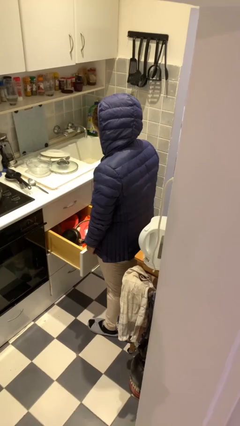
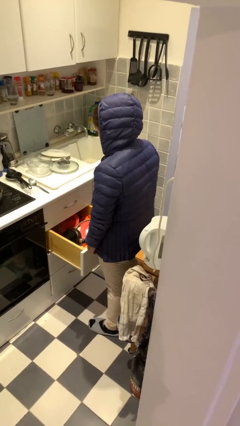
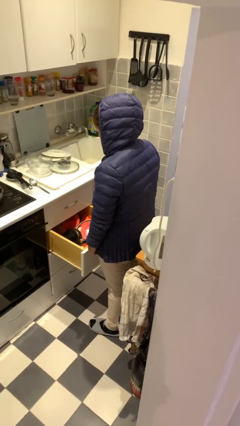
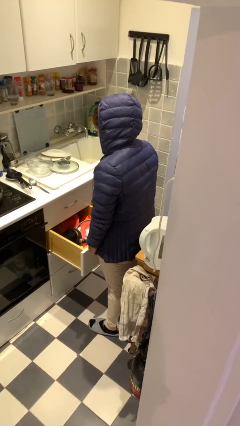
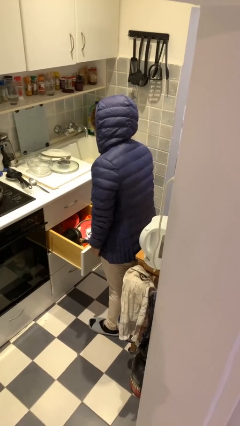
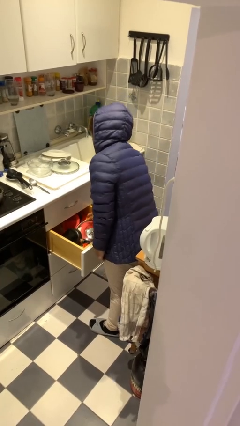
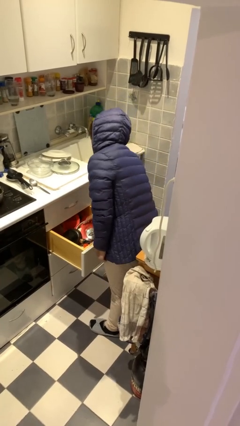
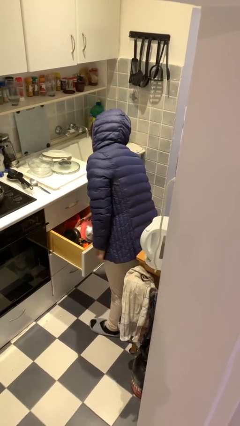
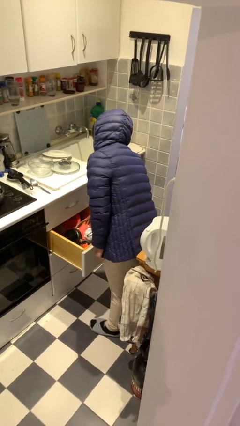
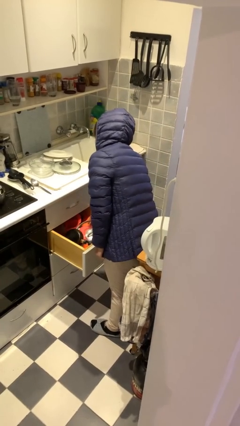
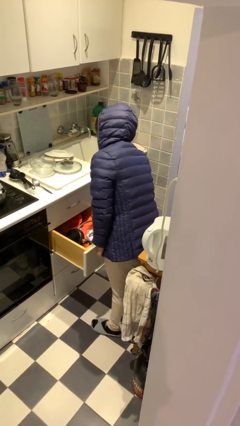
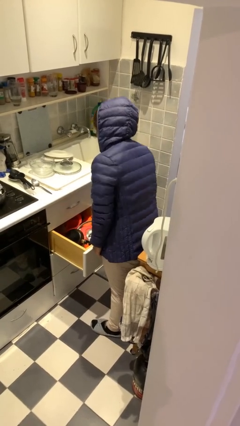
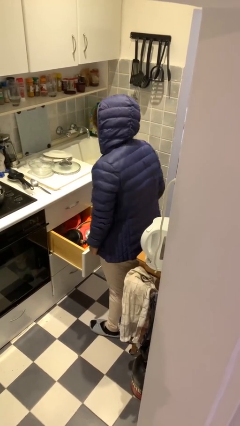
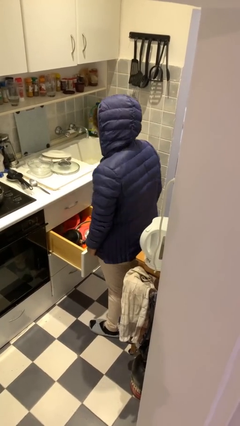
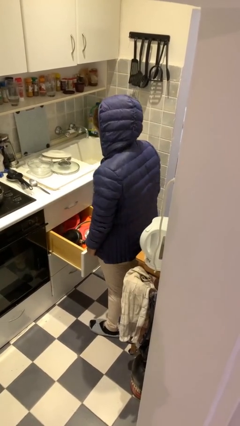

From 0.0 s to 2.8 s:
person searches in kitchen drawer

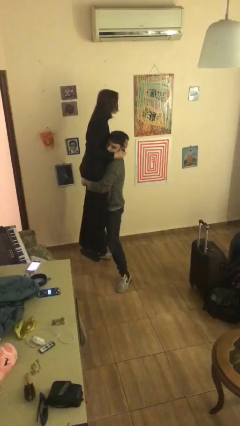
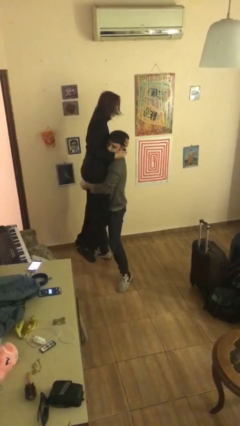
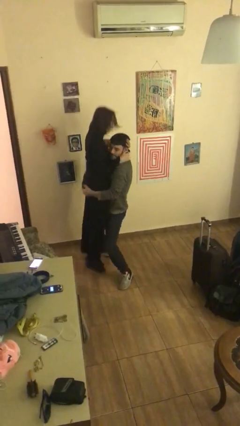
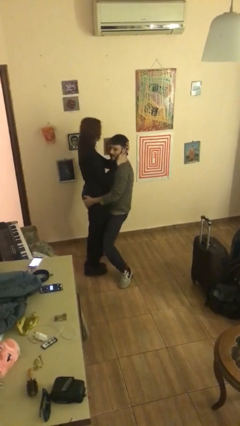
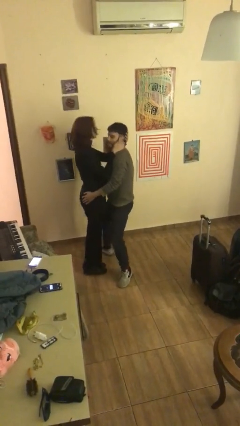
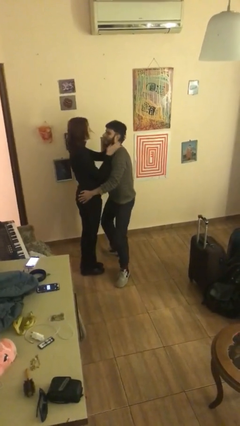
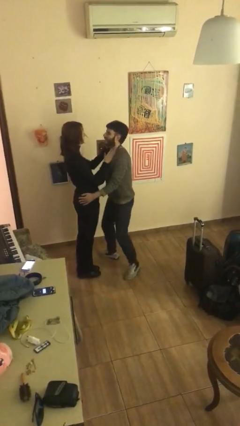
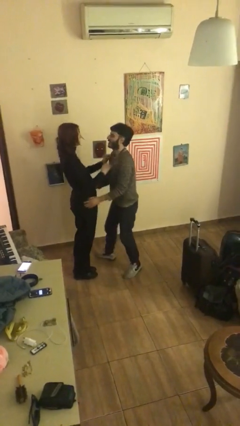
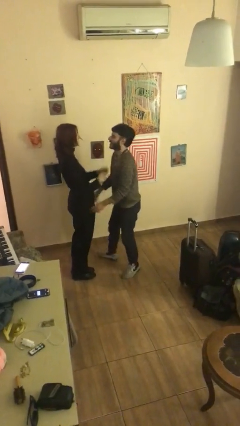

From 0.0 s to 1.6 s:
person puts down person

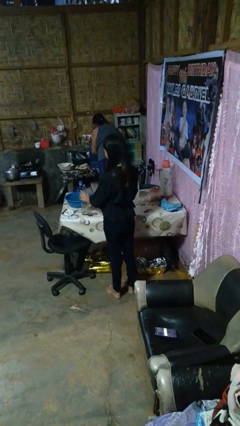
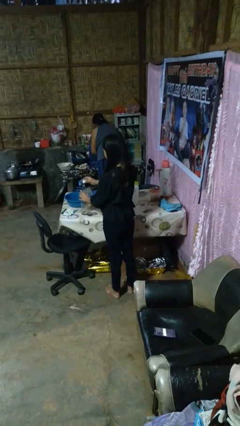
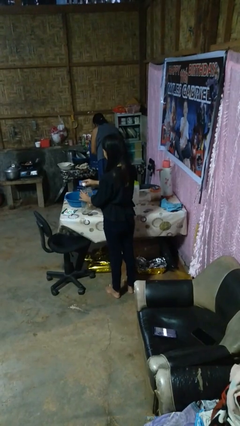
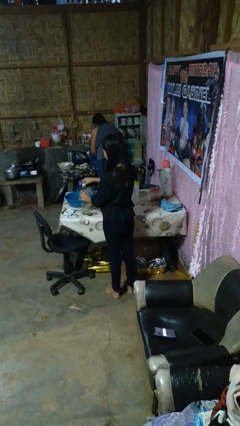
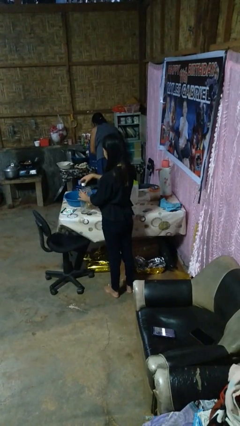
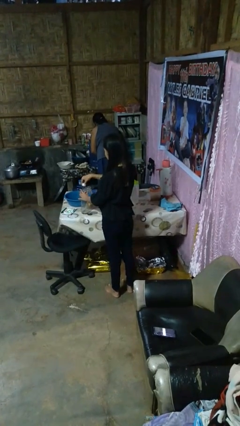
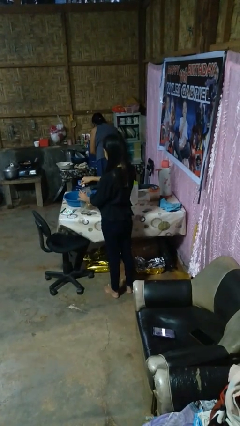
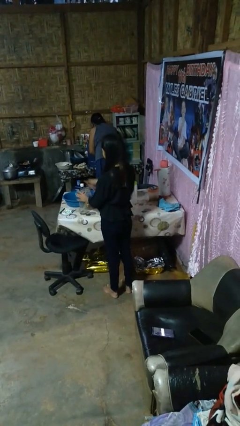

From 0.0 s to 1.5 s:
person screws lid to bottle

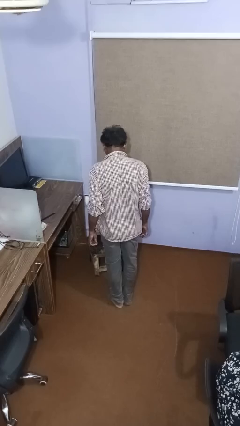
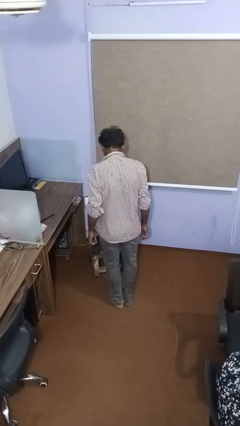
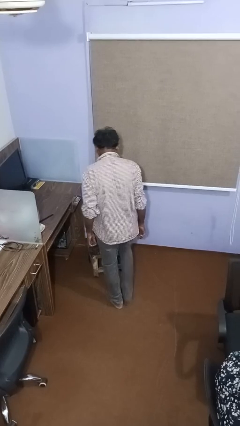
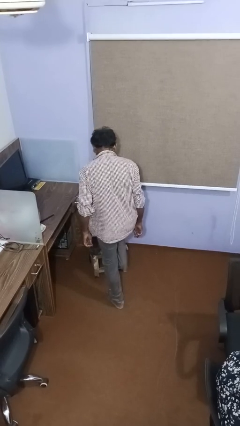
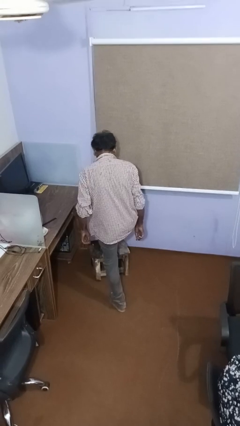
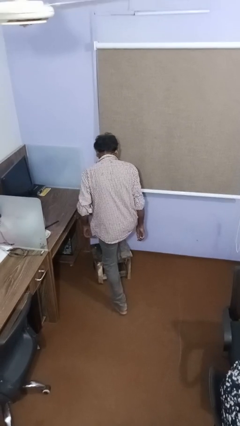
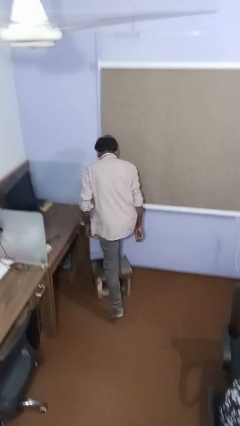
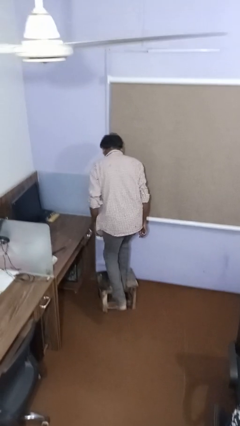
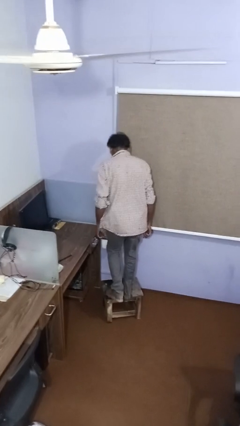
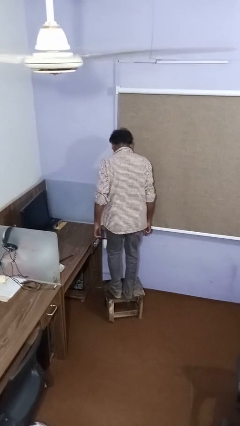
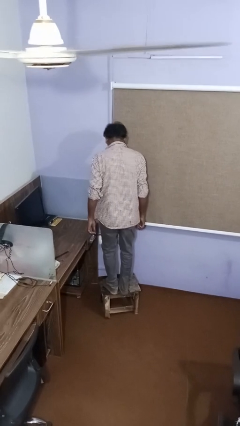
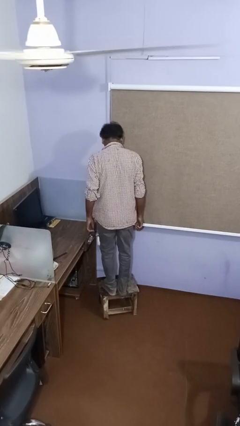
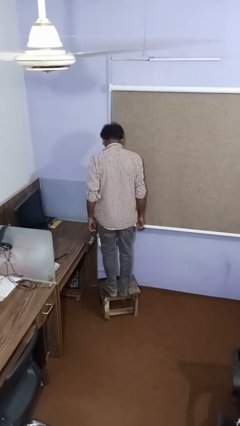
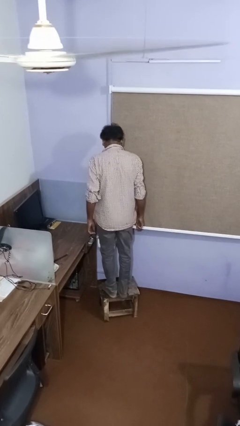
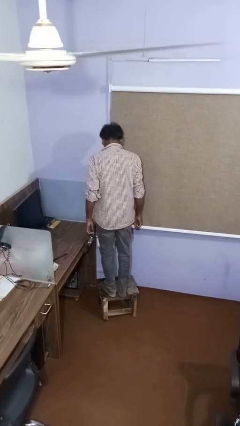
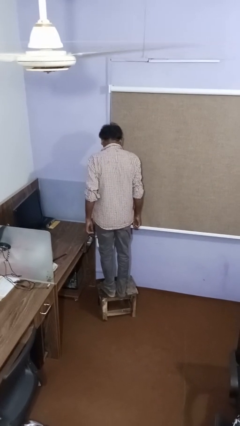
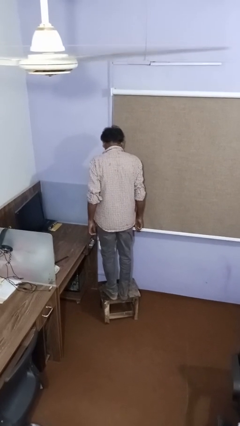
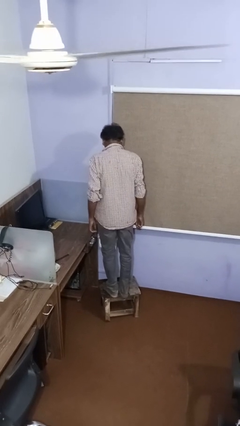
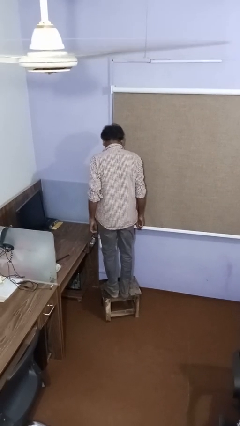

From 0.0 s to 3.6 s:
person climbs on table

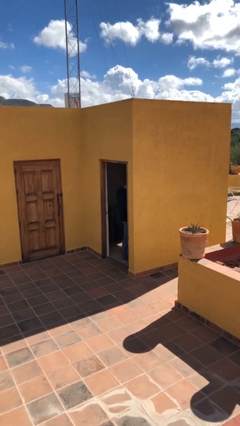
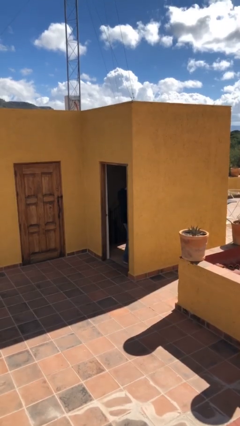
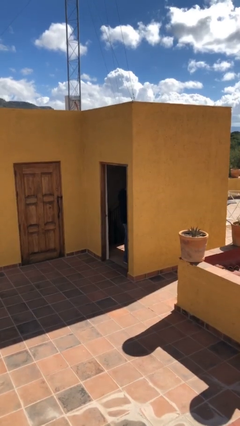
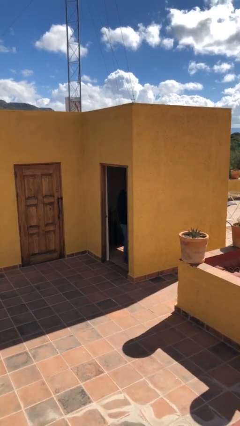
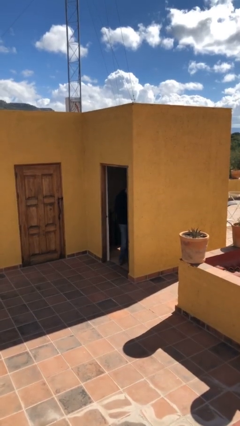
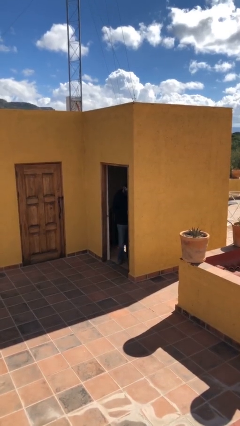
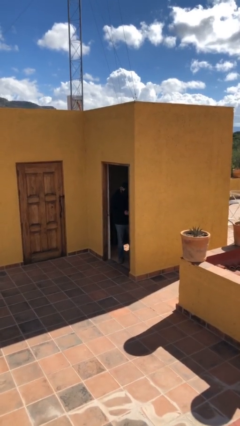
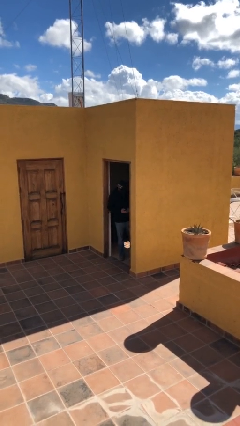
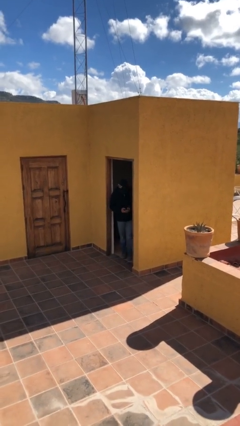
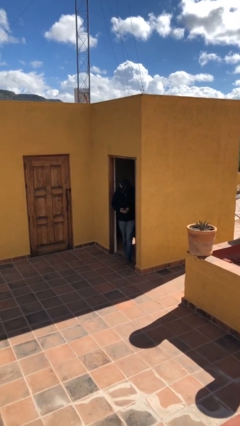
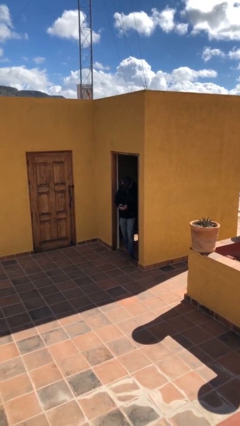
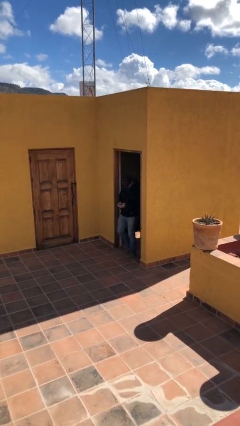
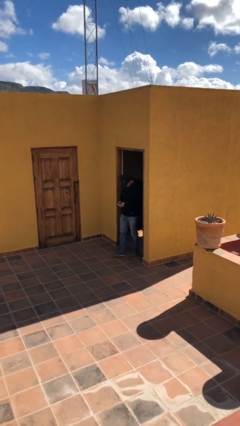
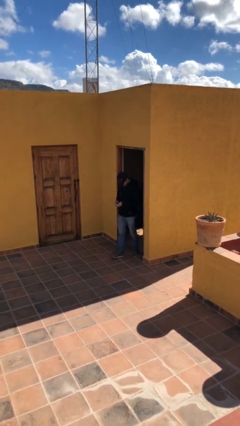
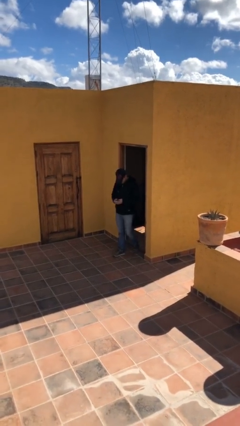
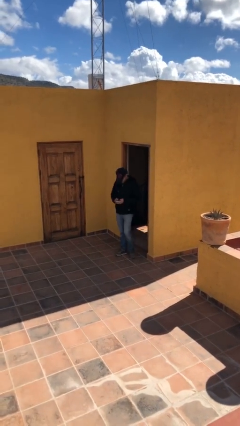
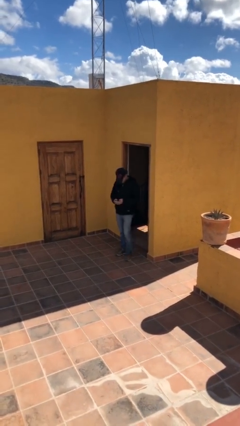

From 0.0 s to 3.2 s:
person enters scene through structure

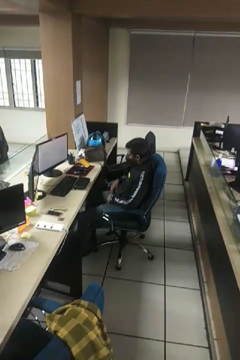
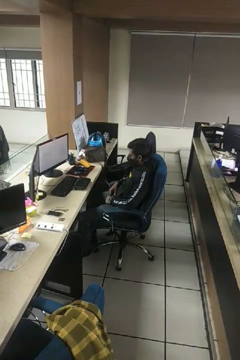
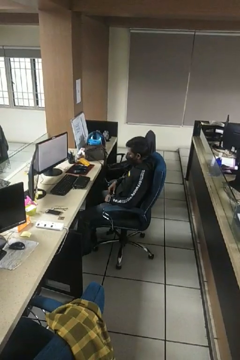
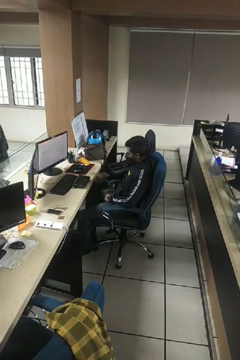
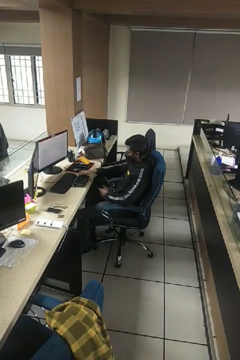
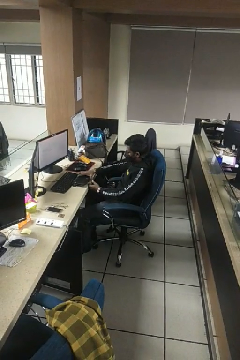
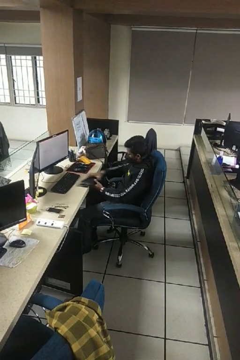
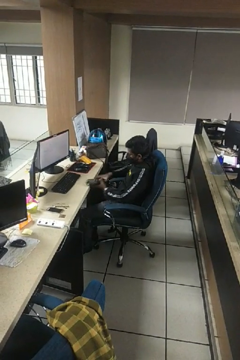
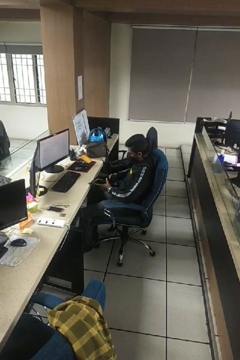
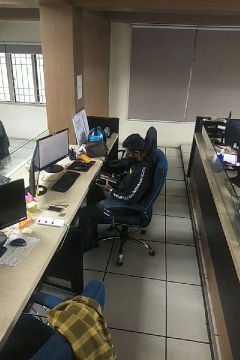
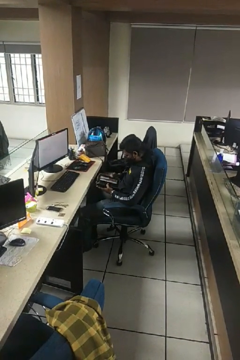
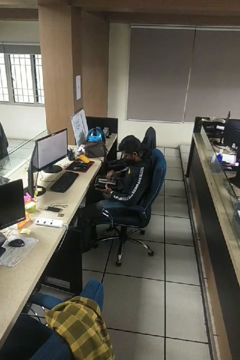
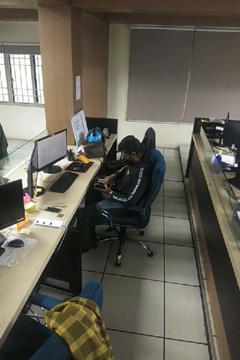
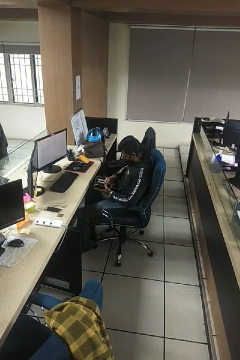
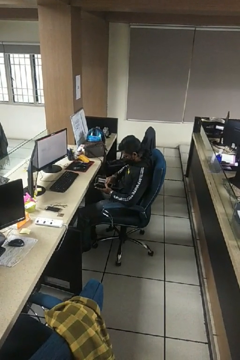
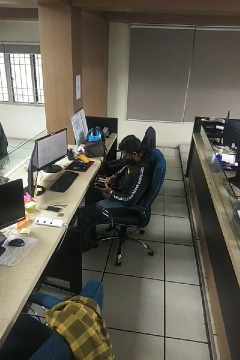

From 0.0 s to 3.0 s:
person searches in purse

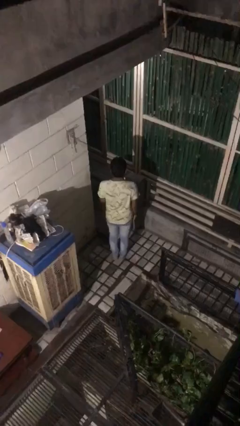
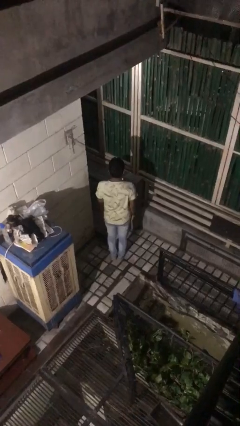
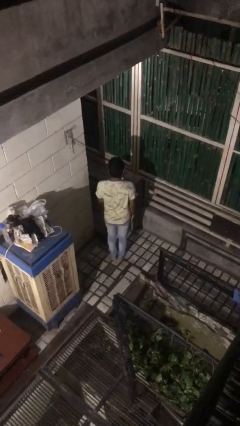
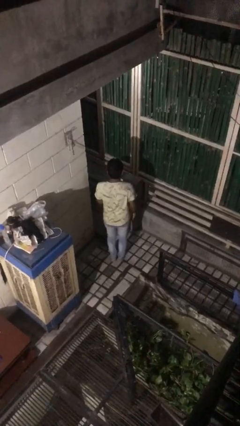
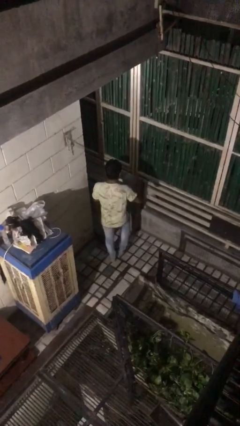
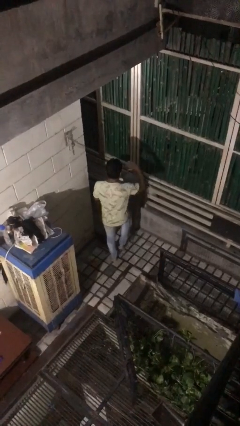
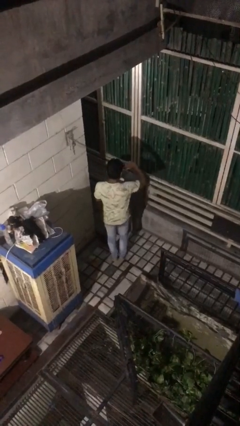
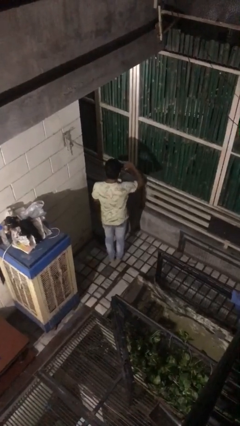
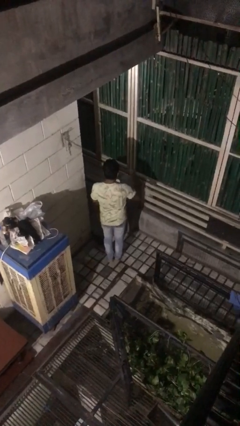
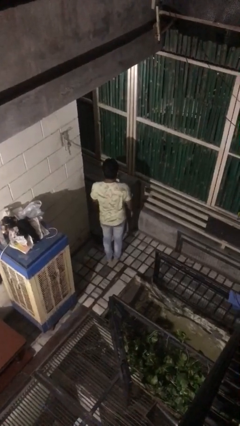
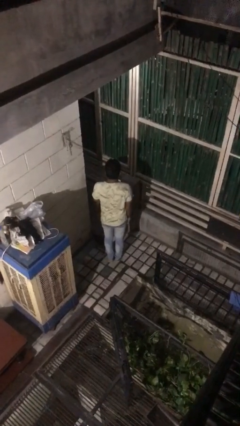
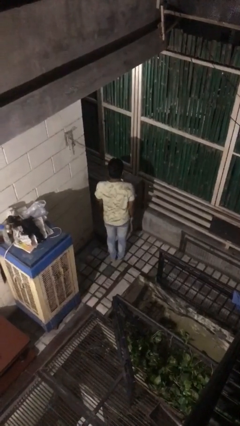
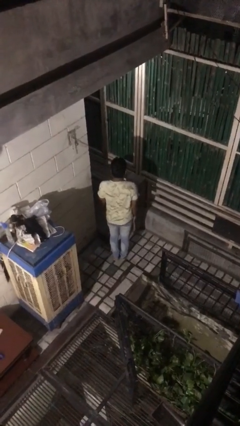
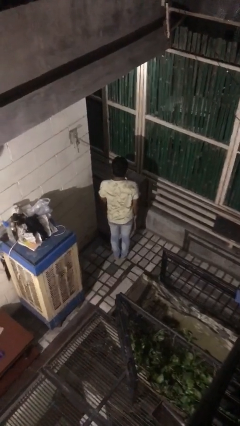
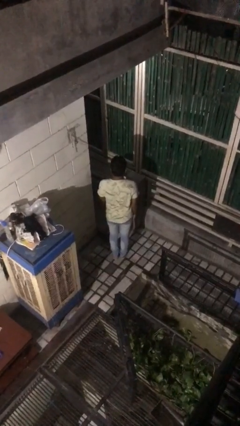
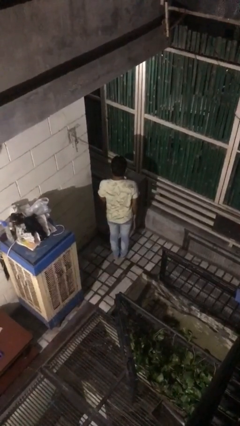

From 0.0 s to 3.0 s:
person salutes
